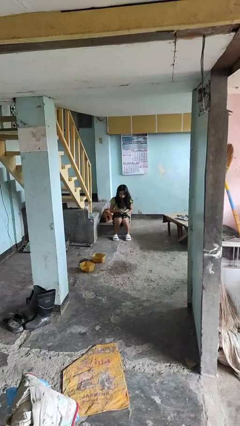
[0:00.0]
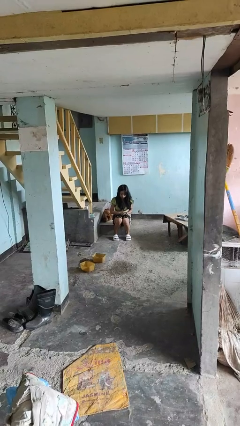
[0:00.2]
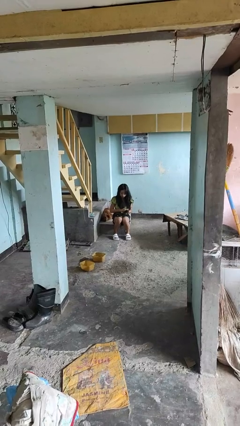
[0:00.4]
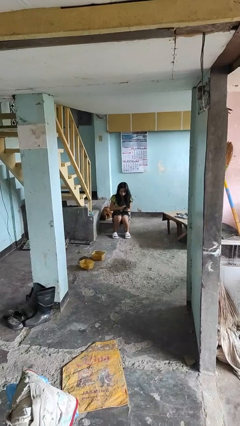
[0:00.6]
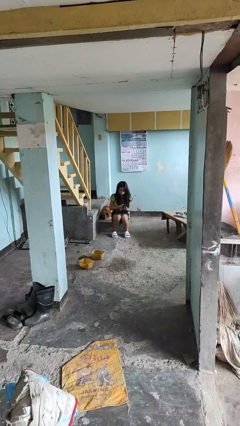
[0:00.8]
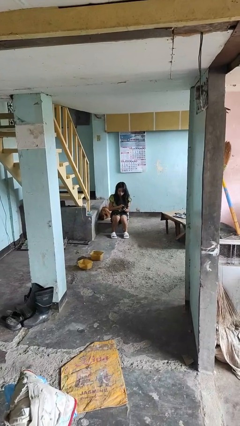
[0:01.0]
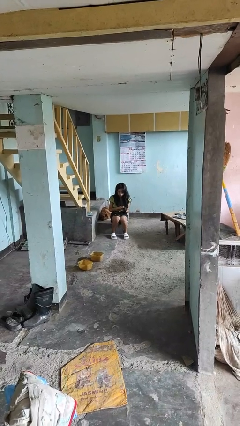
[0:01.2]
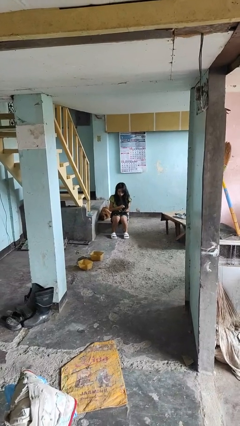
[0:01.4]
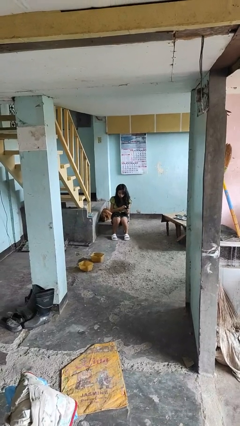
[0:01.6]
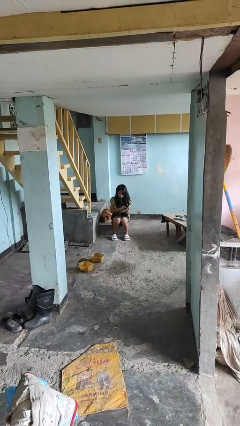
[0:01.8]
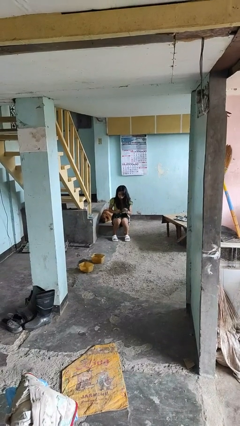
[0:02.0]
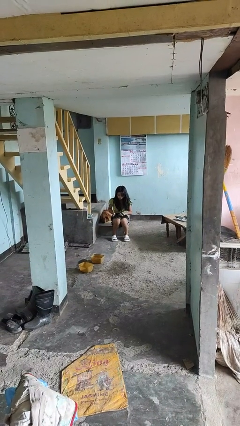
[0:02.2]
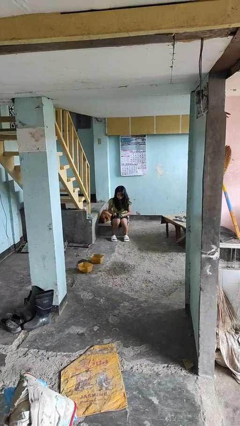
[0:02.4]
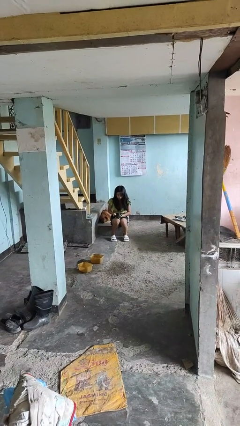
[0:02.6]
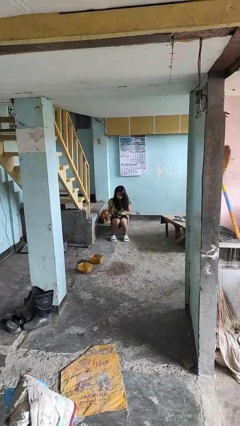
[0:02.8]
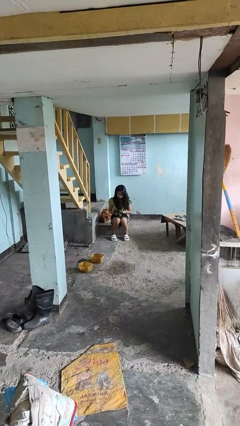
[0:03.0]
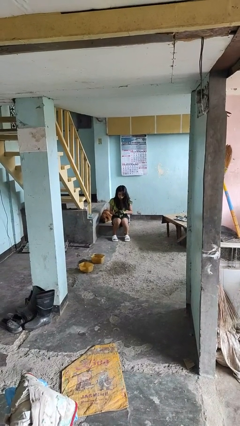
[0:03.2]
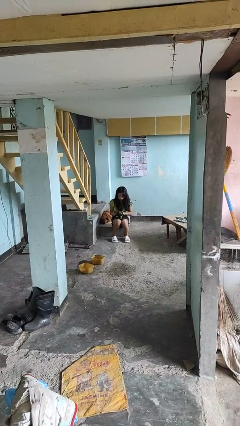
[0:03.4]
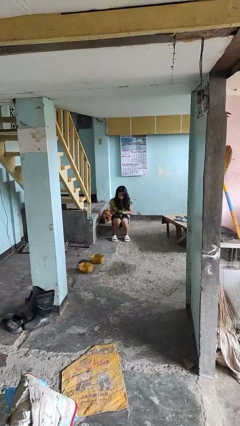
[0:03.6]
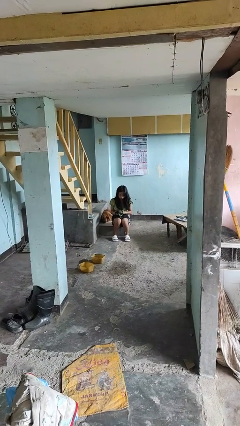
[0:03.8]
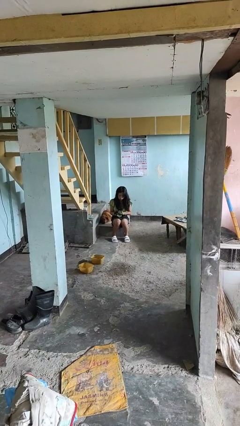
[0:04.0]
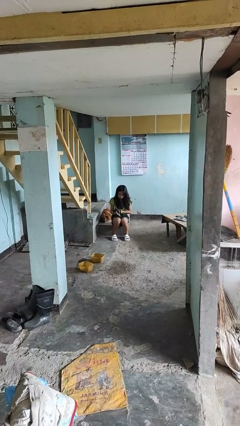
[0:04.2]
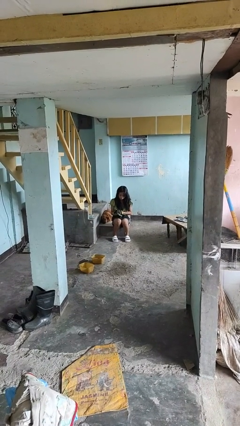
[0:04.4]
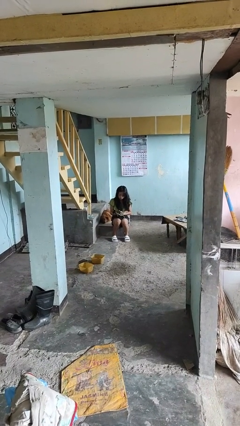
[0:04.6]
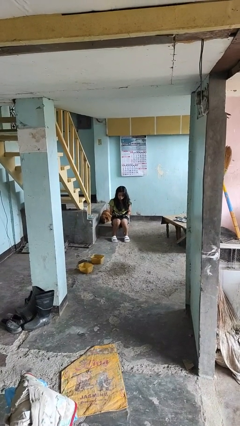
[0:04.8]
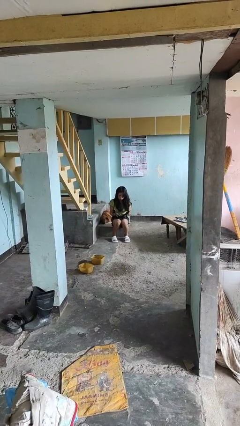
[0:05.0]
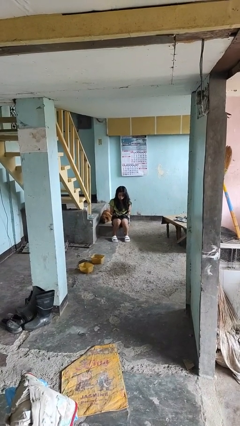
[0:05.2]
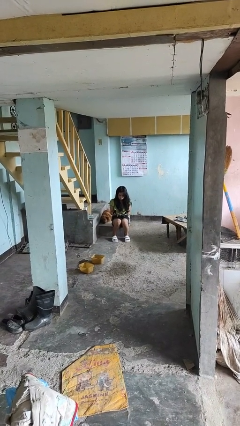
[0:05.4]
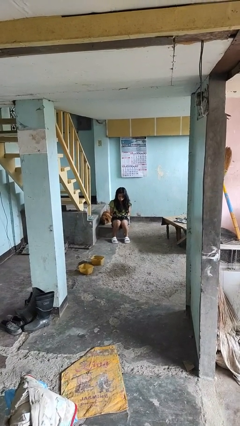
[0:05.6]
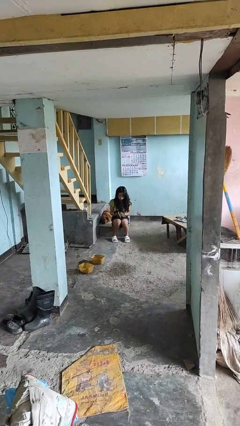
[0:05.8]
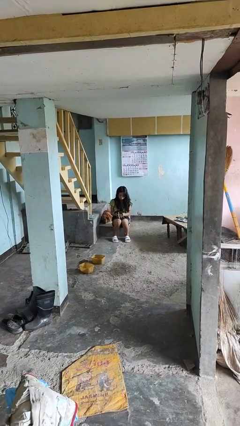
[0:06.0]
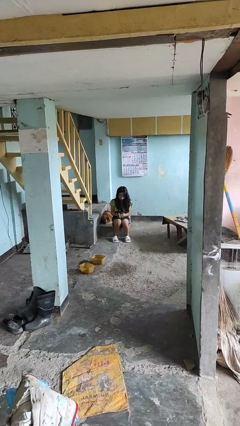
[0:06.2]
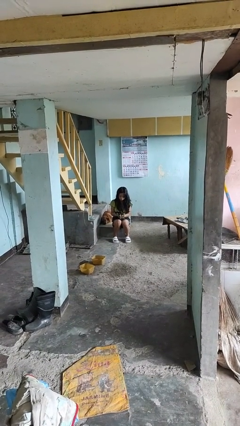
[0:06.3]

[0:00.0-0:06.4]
person puts on gloves

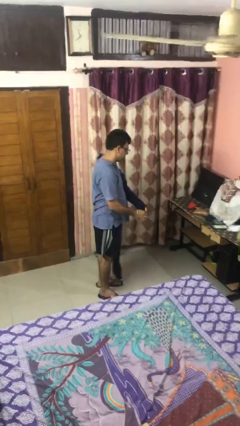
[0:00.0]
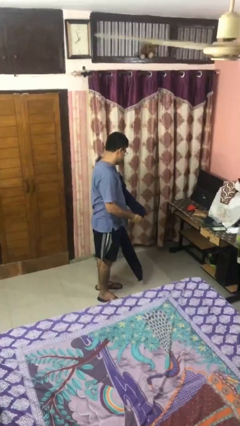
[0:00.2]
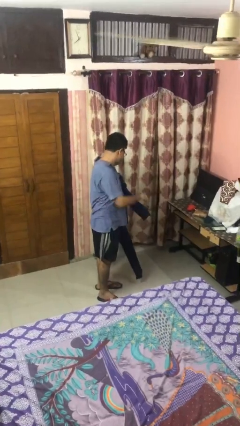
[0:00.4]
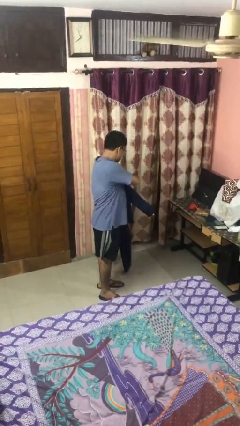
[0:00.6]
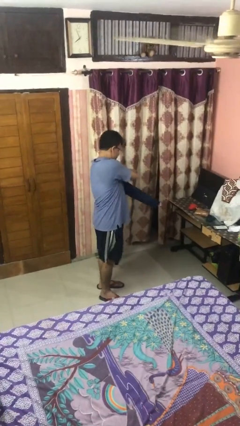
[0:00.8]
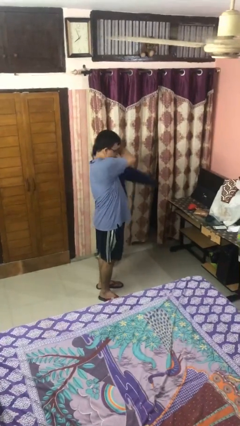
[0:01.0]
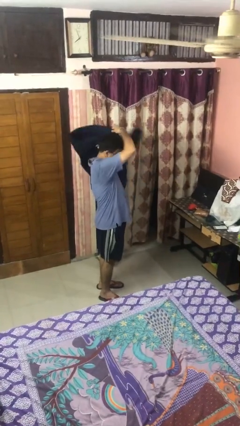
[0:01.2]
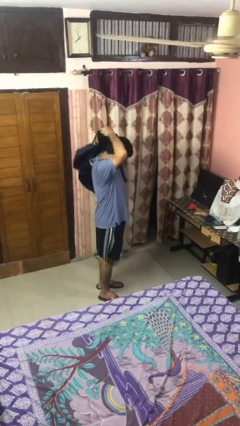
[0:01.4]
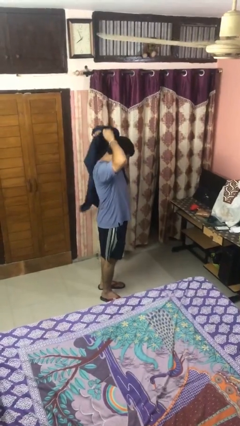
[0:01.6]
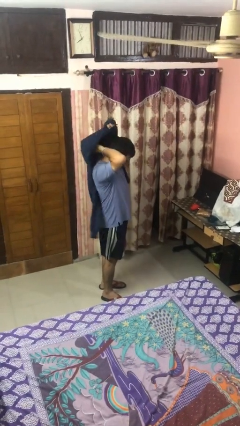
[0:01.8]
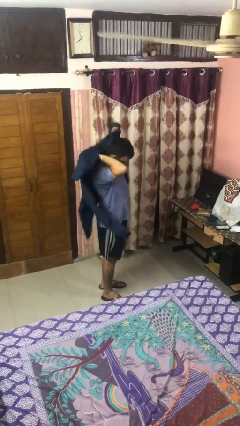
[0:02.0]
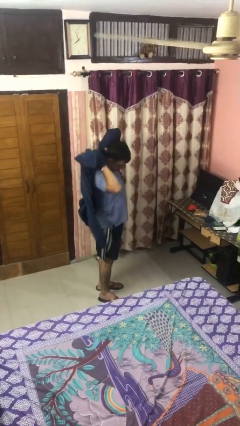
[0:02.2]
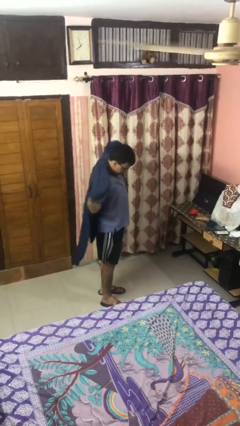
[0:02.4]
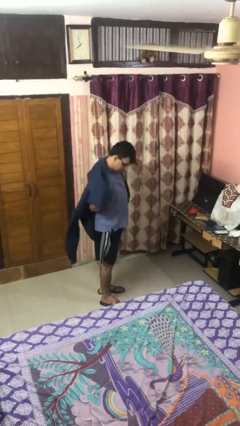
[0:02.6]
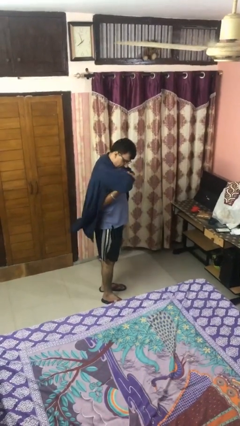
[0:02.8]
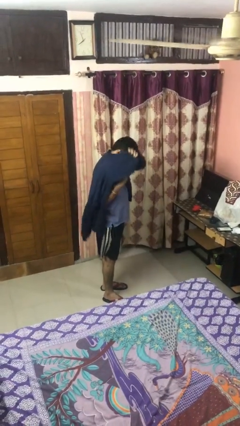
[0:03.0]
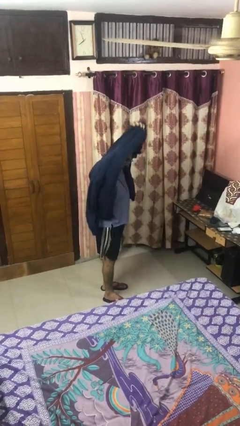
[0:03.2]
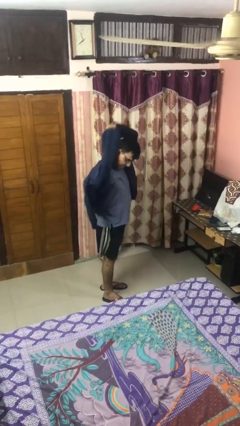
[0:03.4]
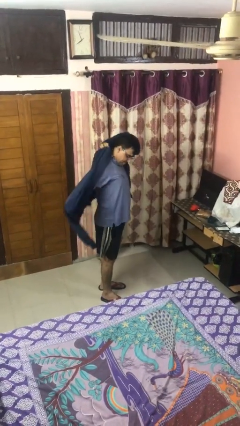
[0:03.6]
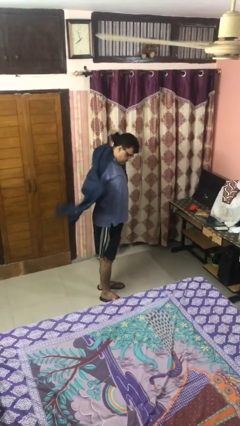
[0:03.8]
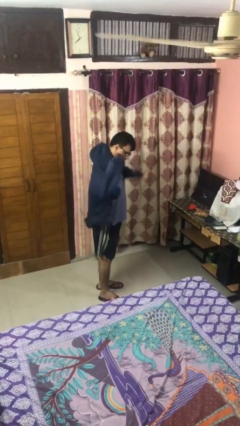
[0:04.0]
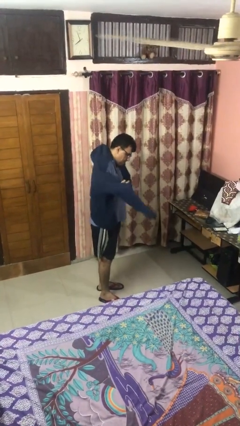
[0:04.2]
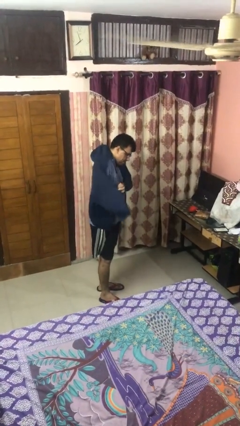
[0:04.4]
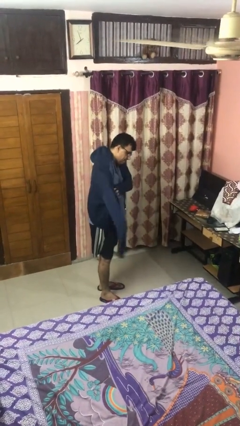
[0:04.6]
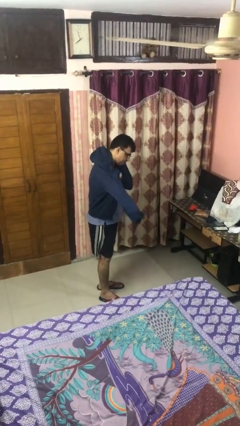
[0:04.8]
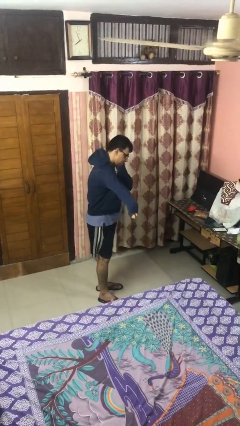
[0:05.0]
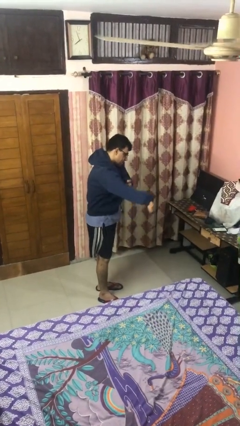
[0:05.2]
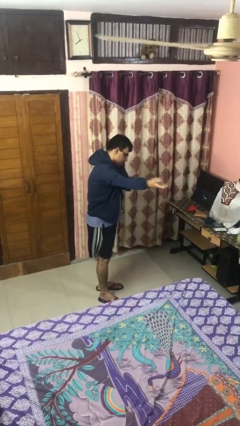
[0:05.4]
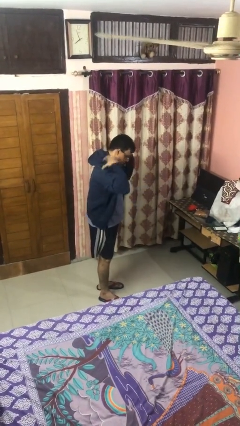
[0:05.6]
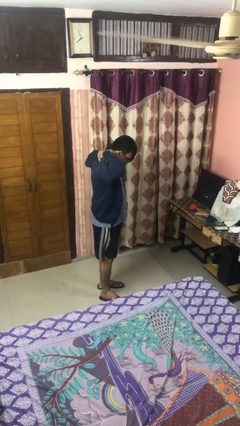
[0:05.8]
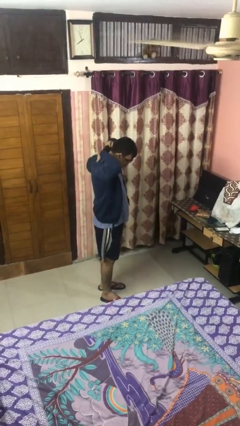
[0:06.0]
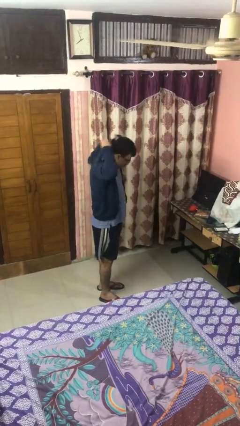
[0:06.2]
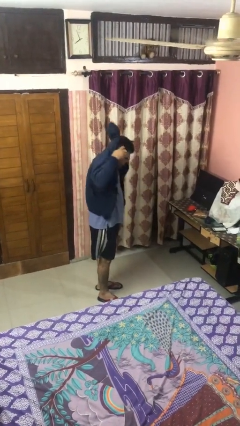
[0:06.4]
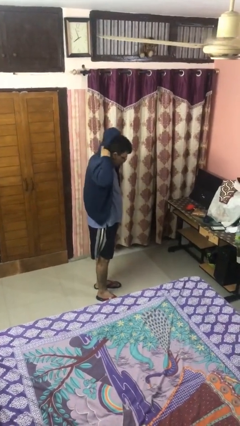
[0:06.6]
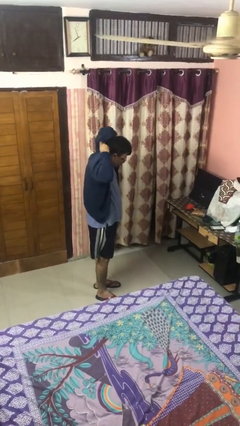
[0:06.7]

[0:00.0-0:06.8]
person puts on hoodie

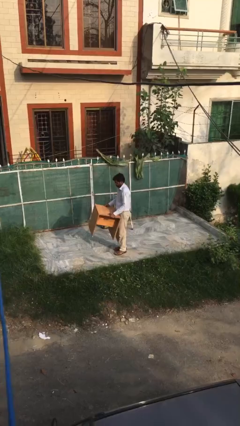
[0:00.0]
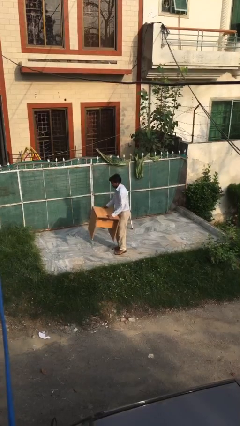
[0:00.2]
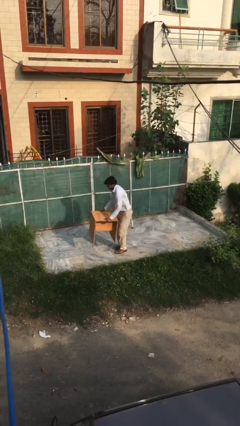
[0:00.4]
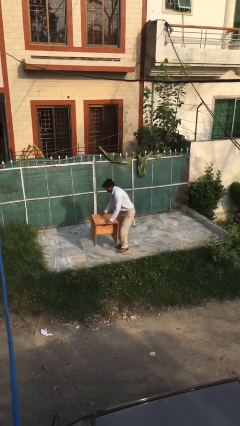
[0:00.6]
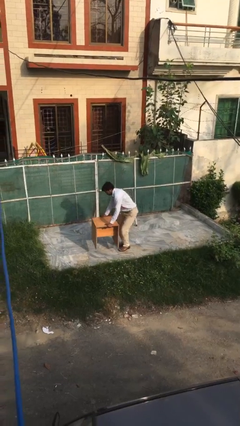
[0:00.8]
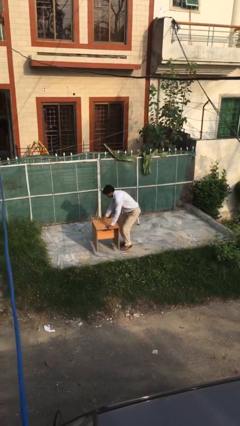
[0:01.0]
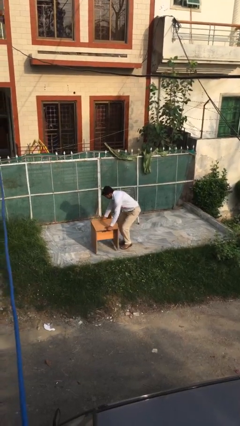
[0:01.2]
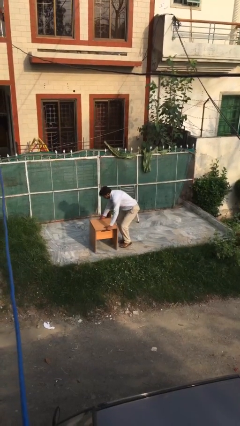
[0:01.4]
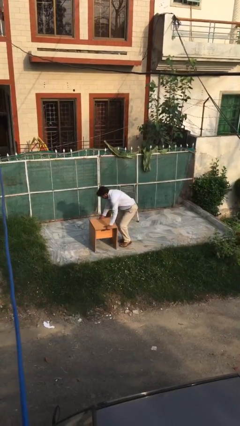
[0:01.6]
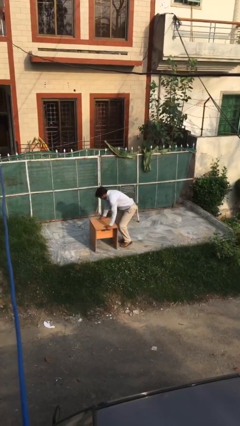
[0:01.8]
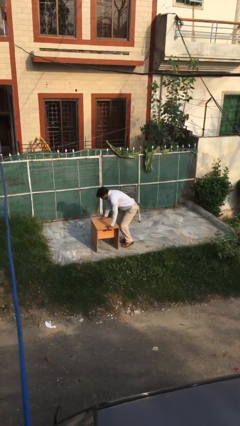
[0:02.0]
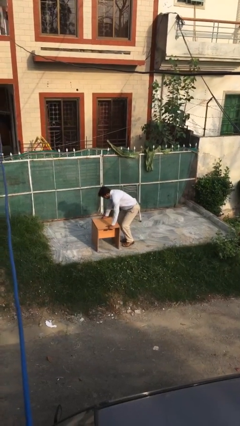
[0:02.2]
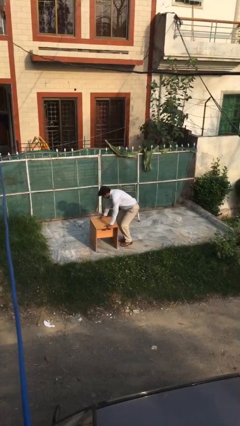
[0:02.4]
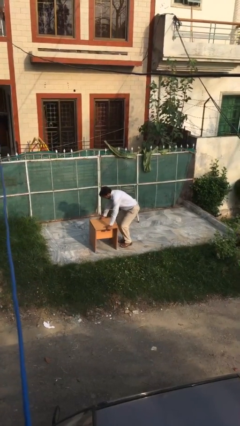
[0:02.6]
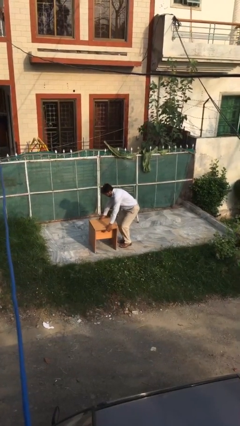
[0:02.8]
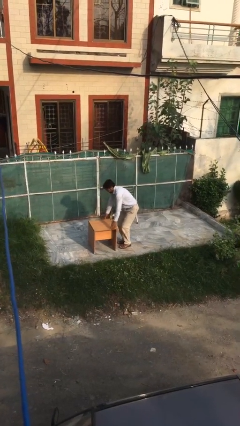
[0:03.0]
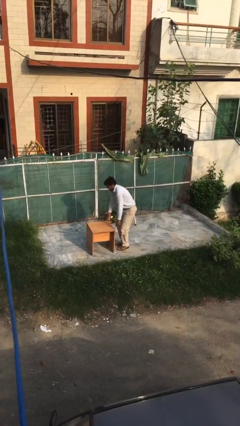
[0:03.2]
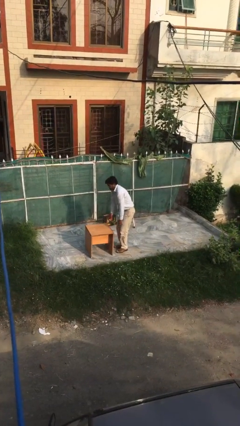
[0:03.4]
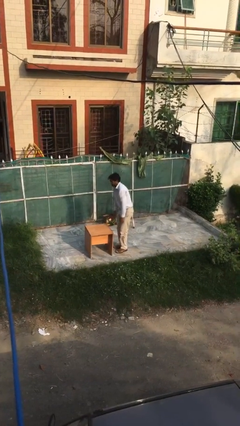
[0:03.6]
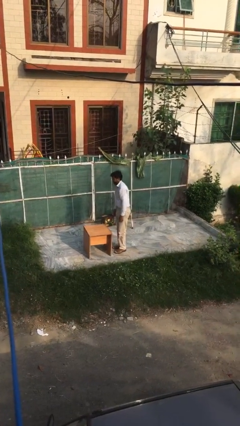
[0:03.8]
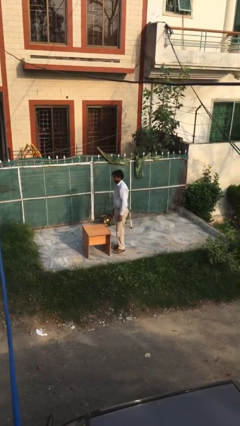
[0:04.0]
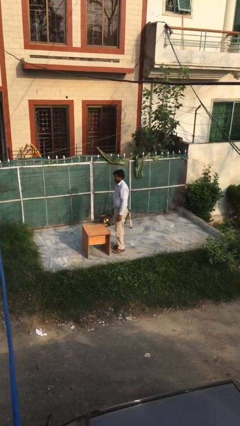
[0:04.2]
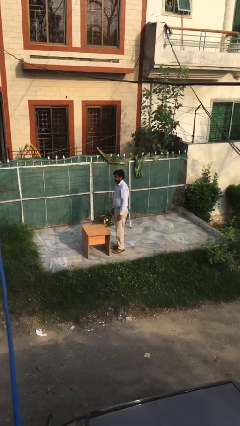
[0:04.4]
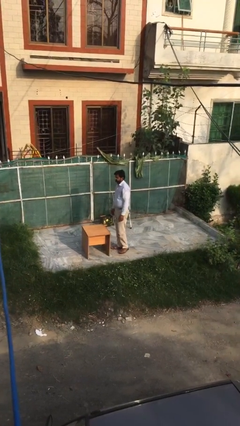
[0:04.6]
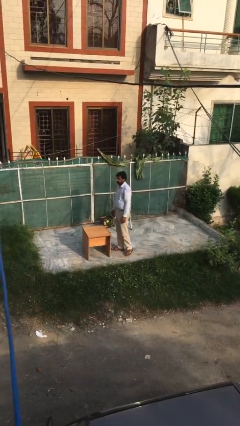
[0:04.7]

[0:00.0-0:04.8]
person puts down object on floor
